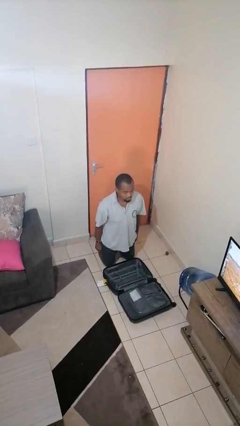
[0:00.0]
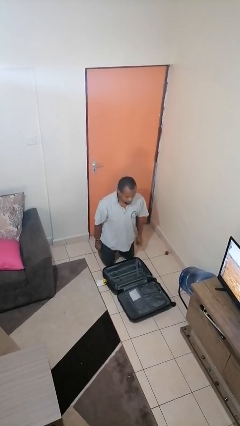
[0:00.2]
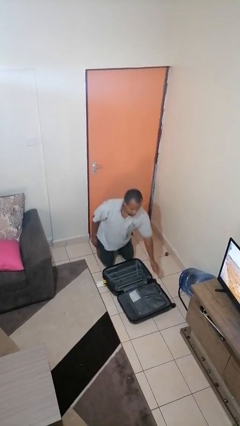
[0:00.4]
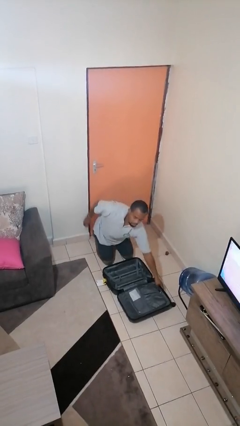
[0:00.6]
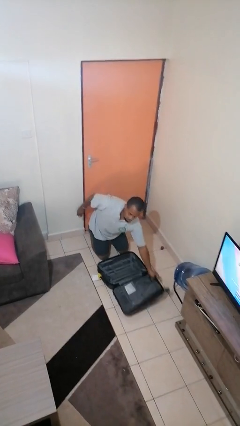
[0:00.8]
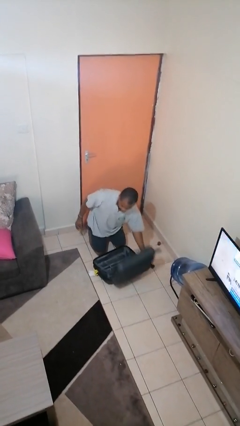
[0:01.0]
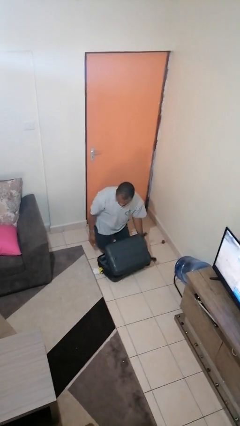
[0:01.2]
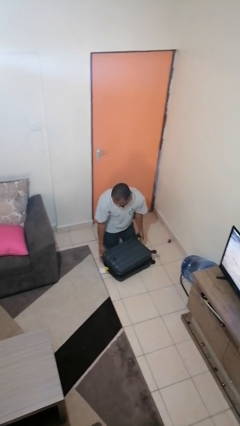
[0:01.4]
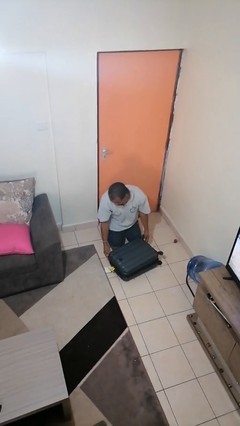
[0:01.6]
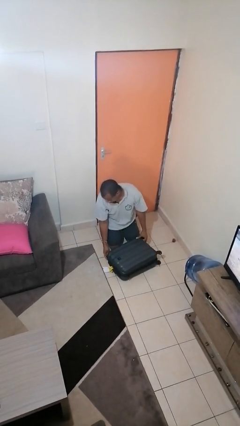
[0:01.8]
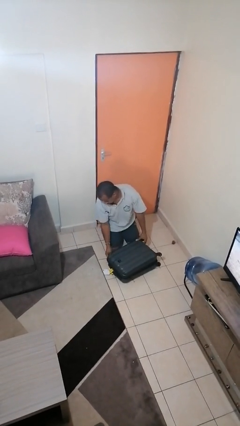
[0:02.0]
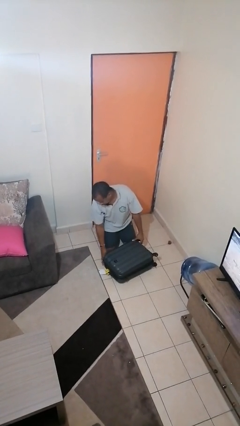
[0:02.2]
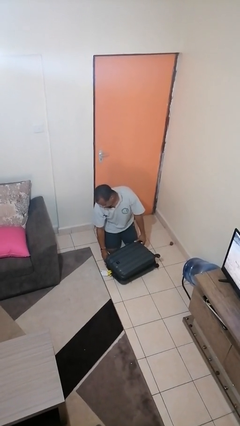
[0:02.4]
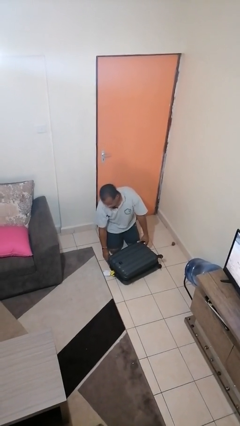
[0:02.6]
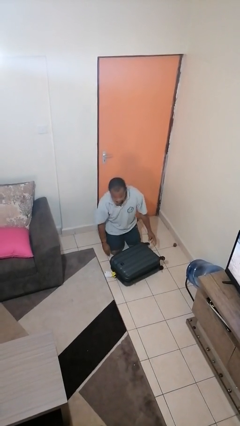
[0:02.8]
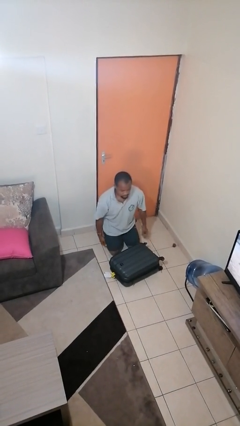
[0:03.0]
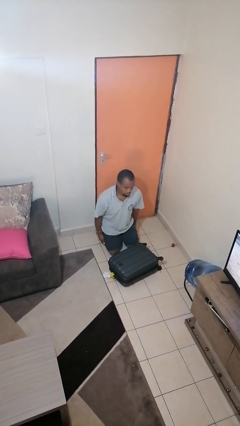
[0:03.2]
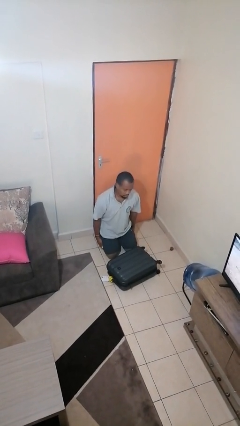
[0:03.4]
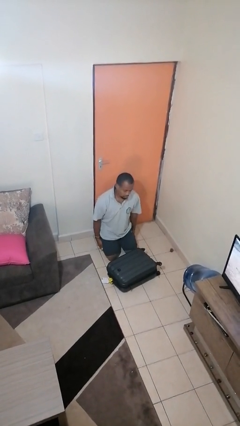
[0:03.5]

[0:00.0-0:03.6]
person closes suitcase

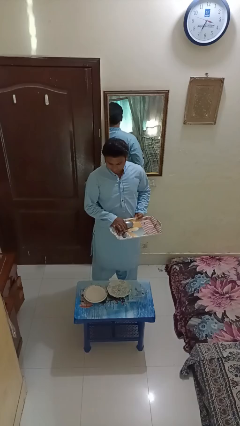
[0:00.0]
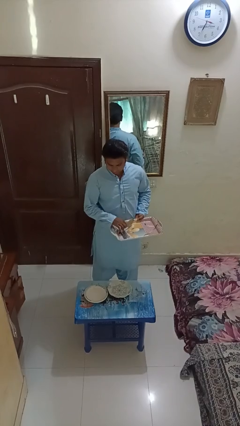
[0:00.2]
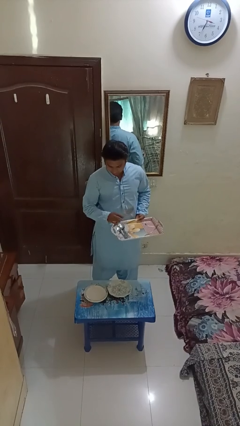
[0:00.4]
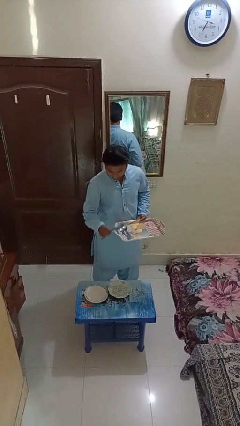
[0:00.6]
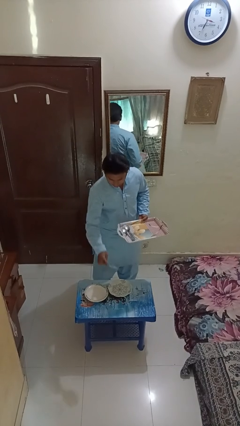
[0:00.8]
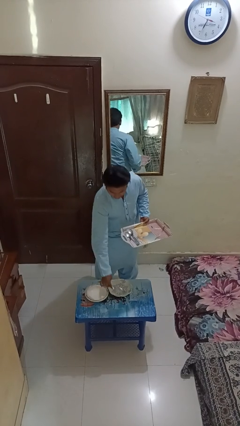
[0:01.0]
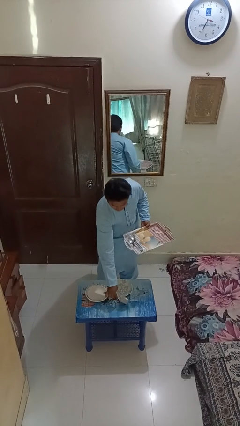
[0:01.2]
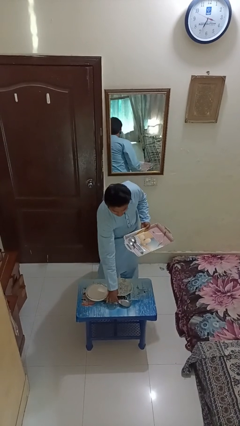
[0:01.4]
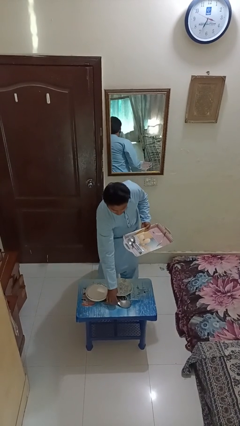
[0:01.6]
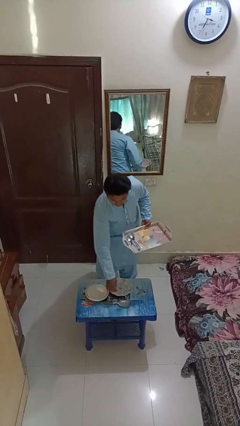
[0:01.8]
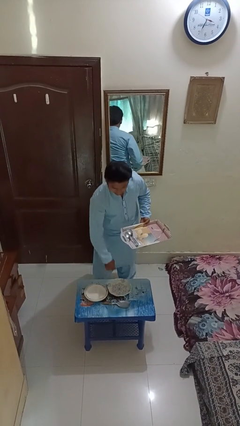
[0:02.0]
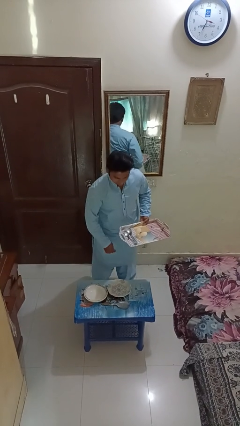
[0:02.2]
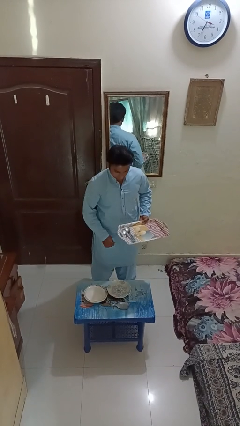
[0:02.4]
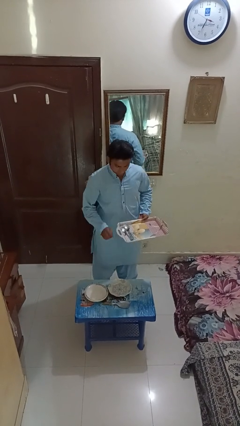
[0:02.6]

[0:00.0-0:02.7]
person sets table

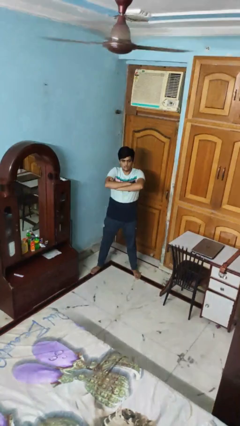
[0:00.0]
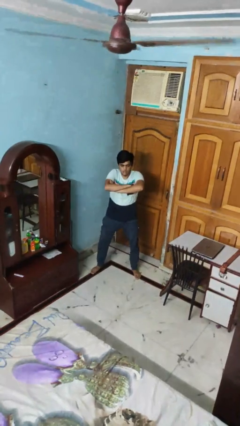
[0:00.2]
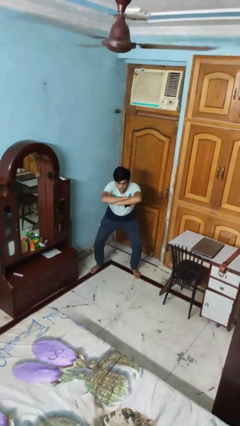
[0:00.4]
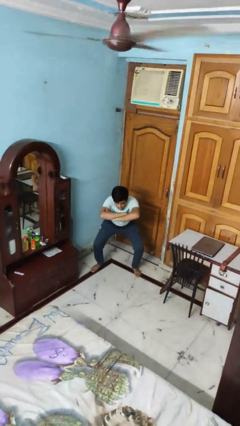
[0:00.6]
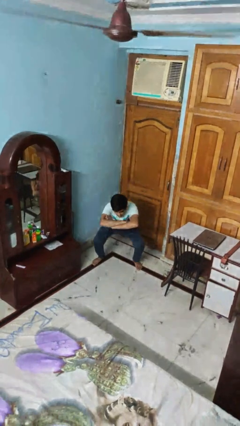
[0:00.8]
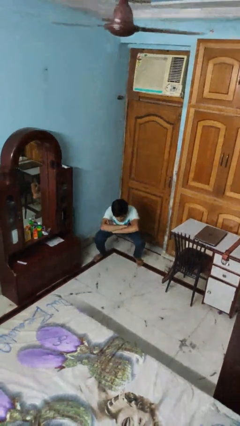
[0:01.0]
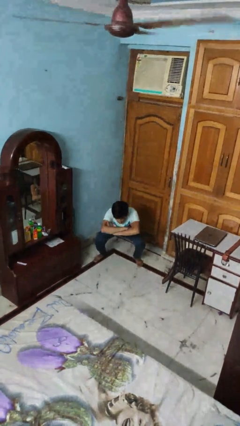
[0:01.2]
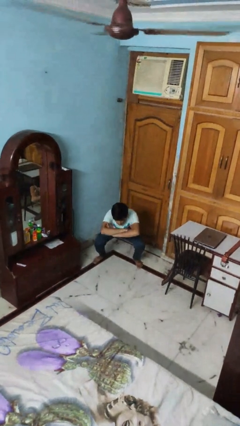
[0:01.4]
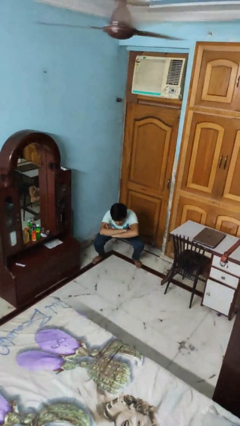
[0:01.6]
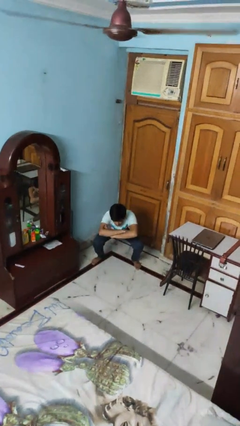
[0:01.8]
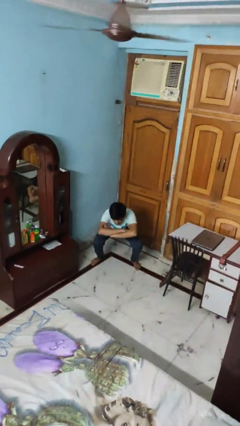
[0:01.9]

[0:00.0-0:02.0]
person squats

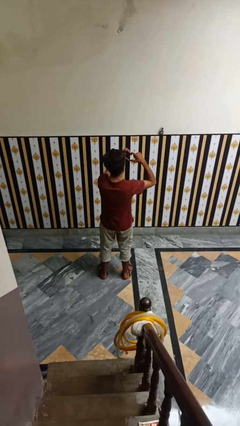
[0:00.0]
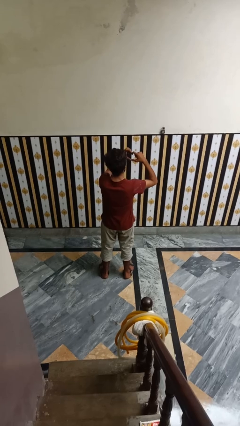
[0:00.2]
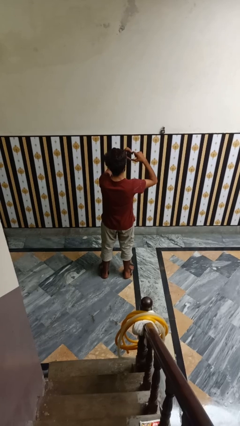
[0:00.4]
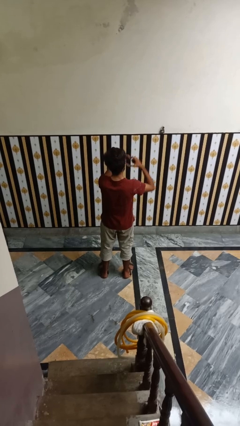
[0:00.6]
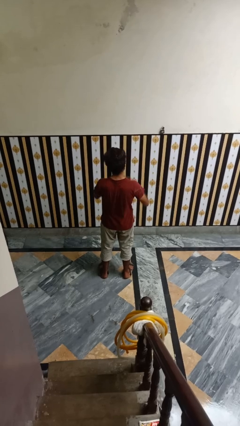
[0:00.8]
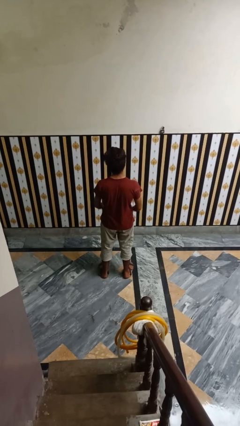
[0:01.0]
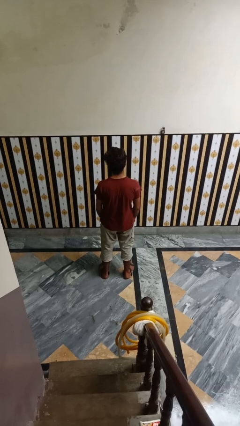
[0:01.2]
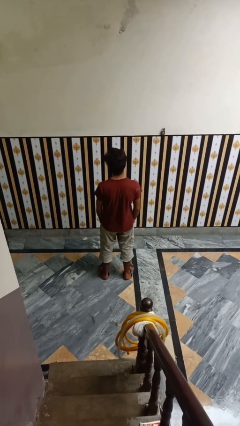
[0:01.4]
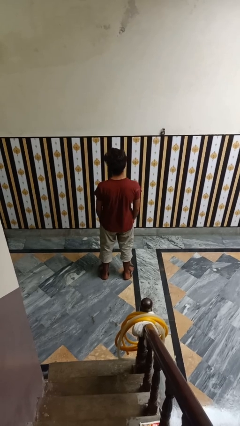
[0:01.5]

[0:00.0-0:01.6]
person gestures heart

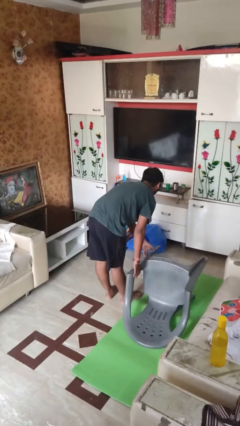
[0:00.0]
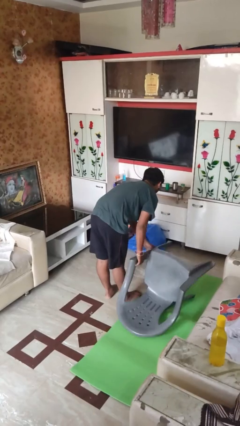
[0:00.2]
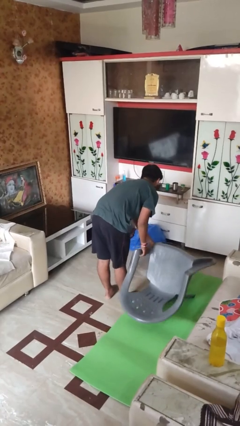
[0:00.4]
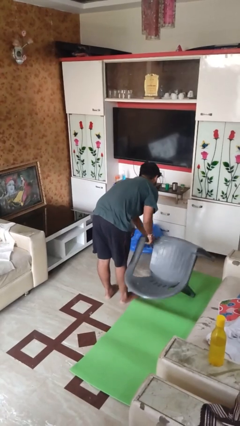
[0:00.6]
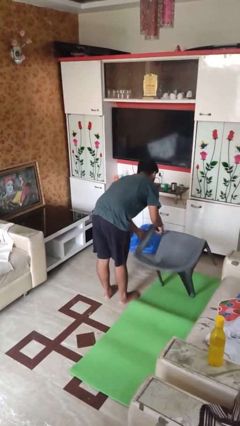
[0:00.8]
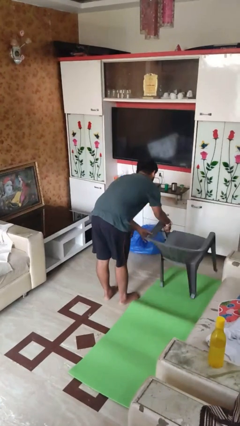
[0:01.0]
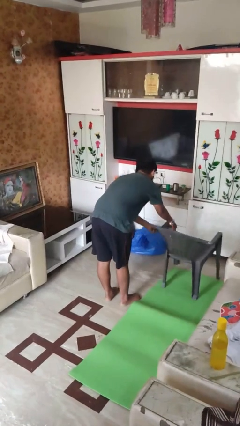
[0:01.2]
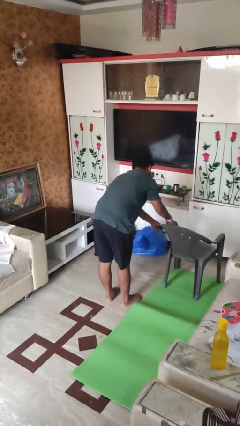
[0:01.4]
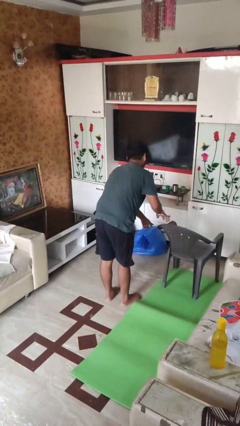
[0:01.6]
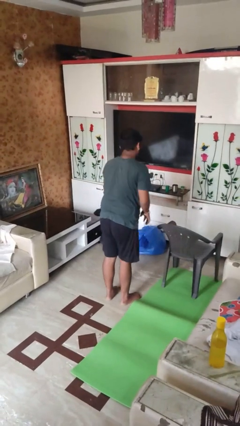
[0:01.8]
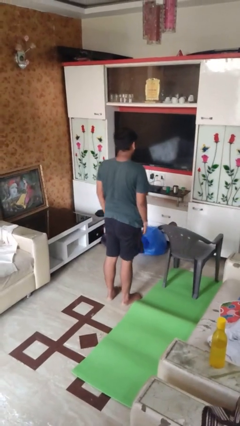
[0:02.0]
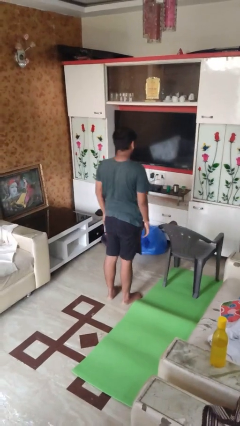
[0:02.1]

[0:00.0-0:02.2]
person sets upright furniture

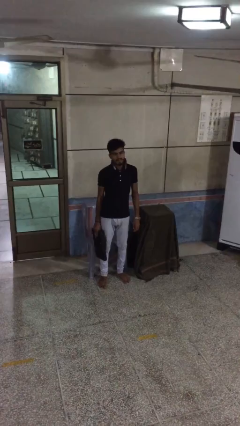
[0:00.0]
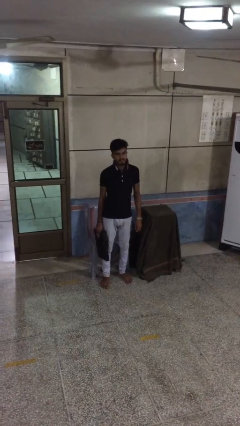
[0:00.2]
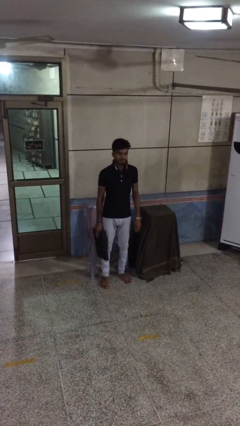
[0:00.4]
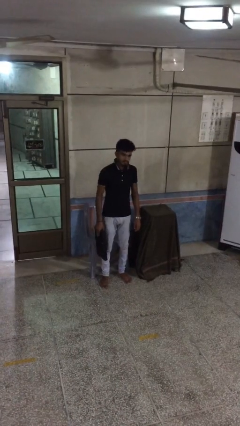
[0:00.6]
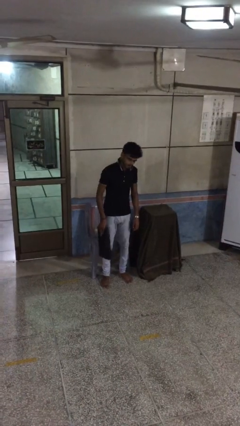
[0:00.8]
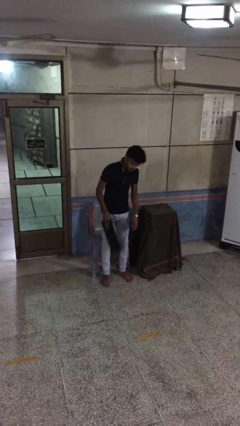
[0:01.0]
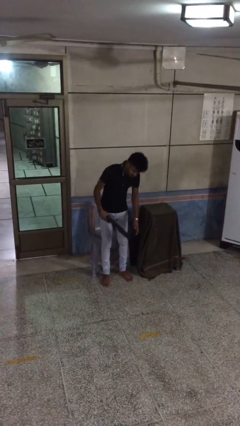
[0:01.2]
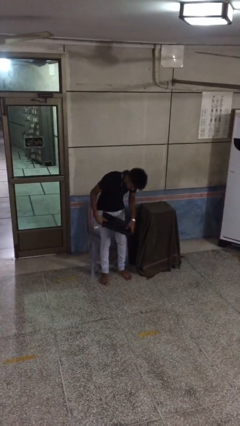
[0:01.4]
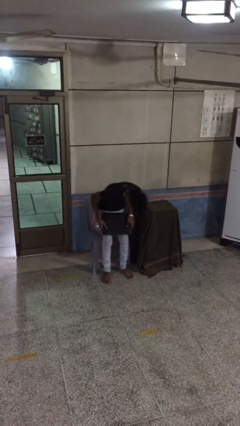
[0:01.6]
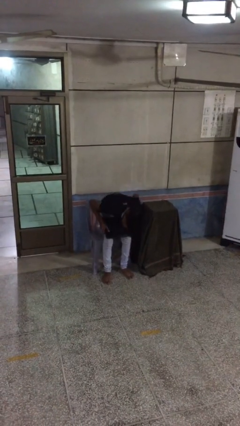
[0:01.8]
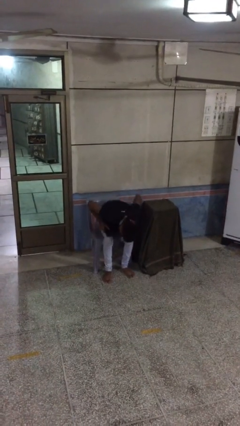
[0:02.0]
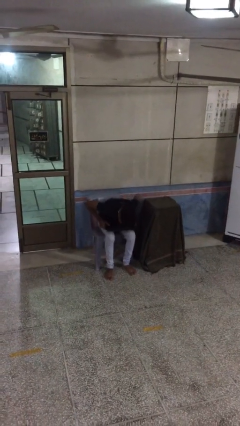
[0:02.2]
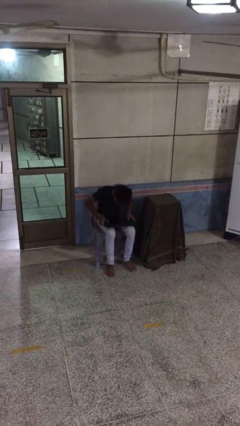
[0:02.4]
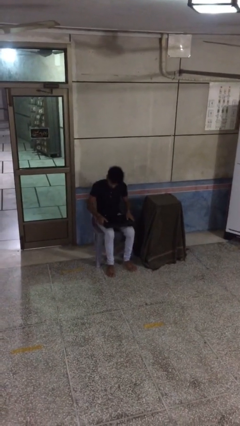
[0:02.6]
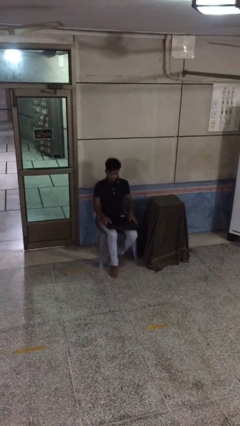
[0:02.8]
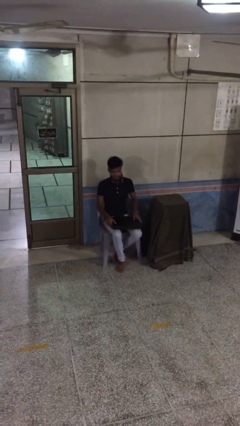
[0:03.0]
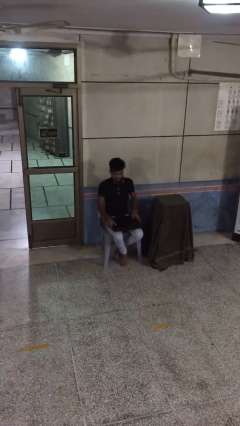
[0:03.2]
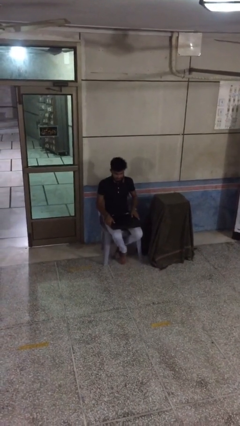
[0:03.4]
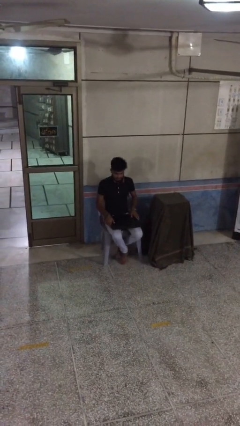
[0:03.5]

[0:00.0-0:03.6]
person sits down

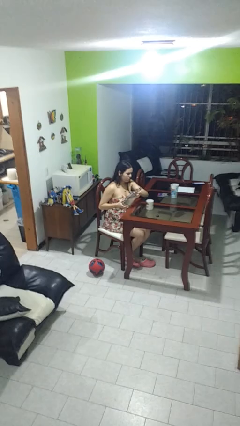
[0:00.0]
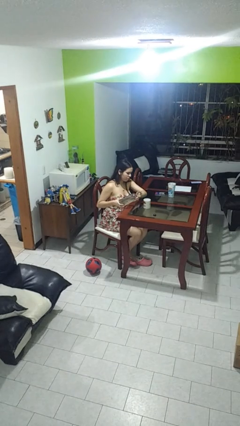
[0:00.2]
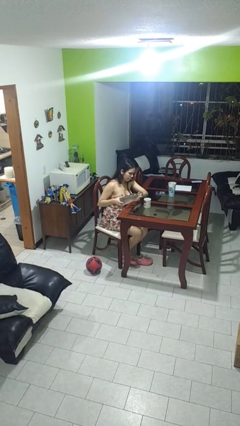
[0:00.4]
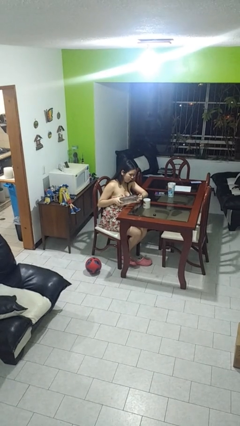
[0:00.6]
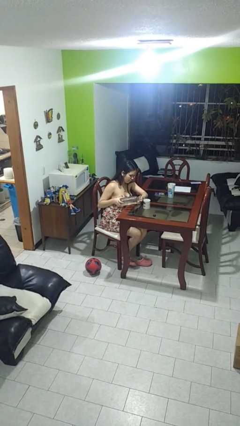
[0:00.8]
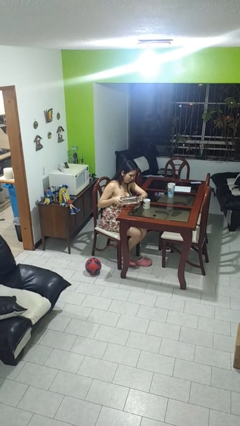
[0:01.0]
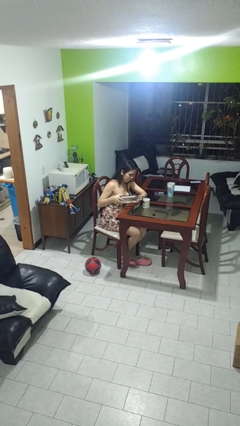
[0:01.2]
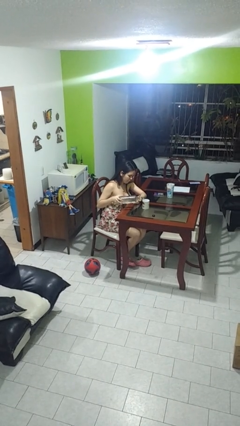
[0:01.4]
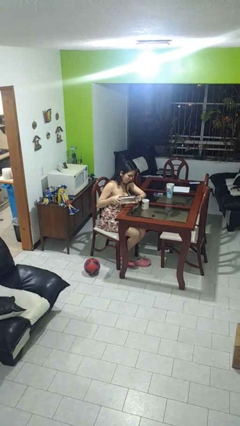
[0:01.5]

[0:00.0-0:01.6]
person pours liquid into cup
